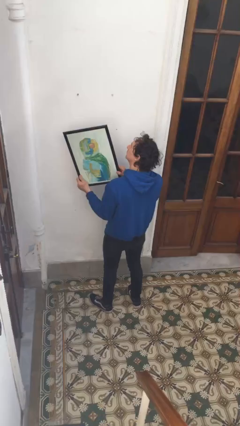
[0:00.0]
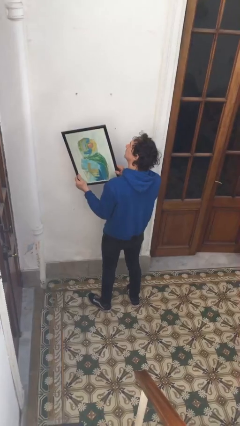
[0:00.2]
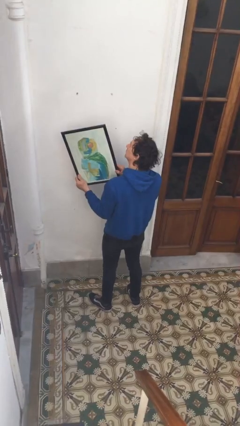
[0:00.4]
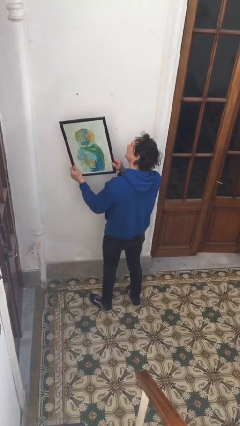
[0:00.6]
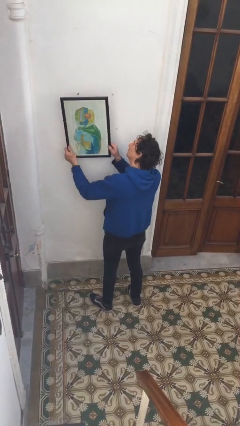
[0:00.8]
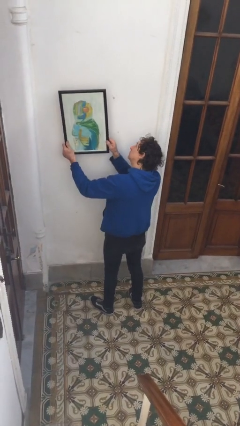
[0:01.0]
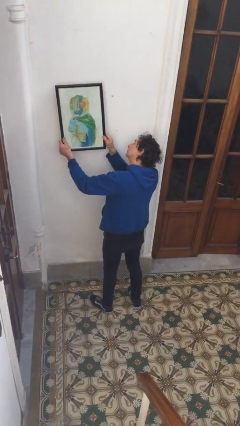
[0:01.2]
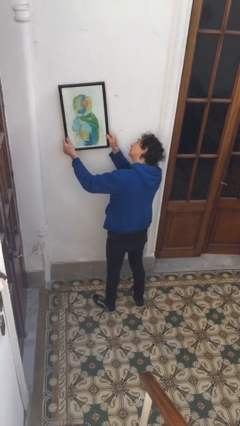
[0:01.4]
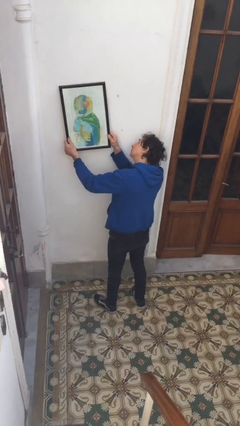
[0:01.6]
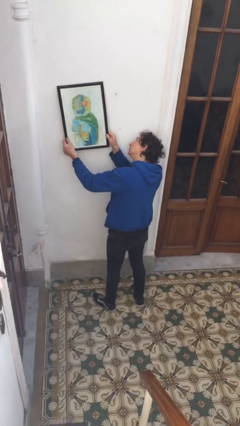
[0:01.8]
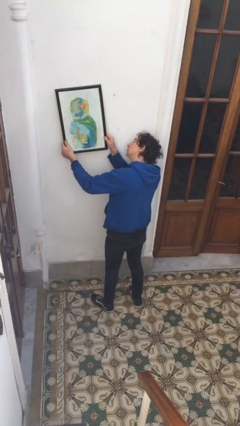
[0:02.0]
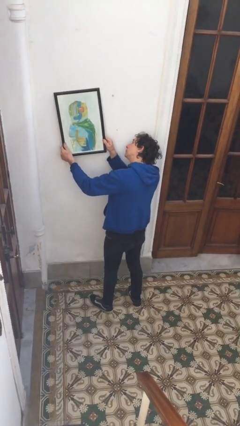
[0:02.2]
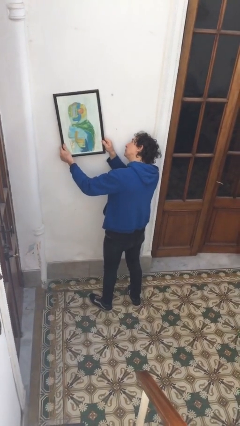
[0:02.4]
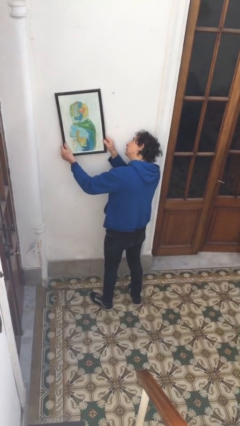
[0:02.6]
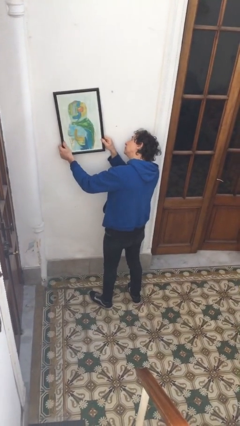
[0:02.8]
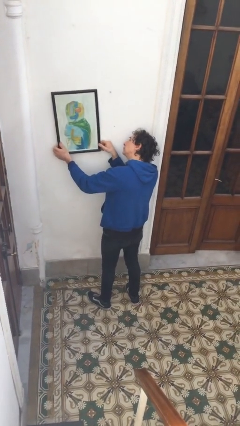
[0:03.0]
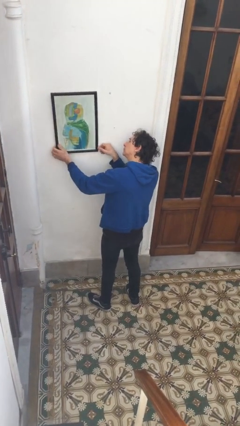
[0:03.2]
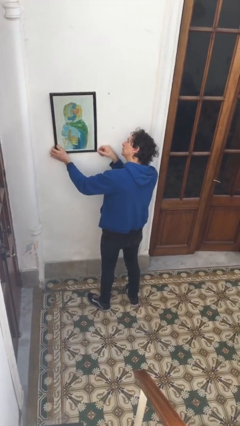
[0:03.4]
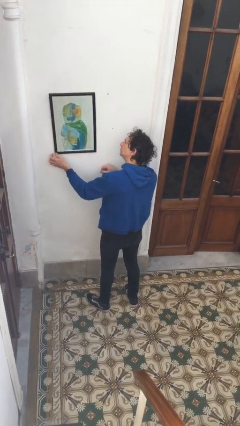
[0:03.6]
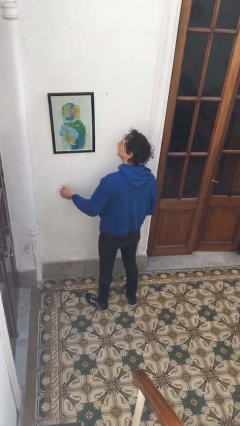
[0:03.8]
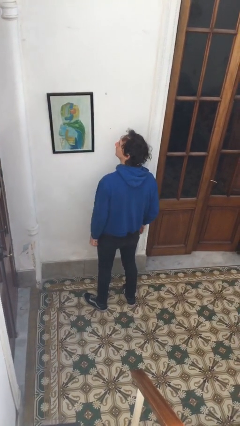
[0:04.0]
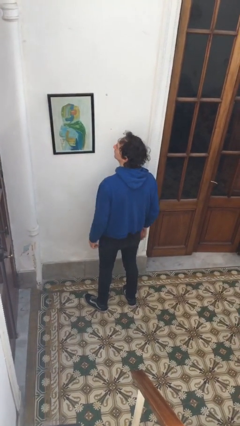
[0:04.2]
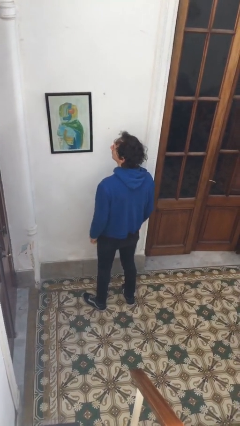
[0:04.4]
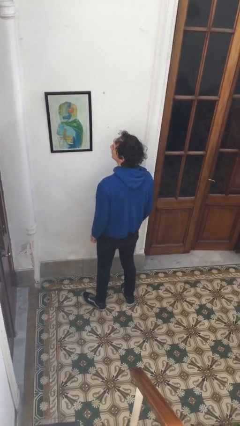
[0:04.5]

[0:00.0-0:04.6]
person puts up picture frame

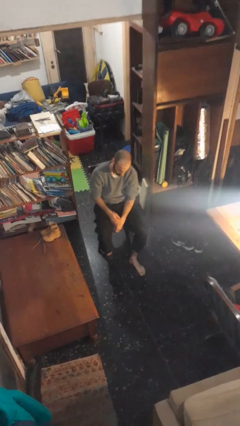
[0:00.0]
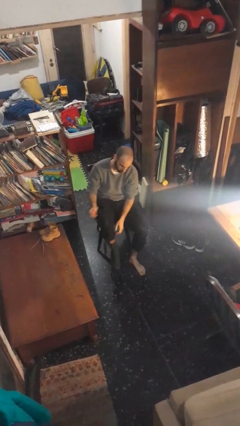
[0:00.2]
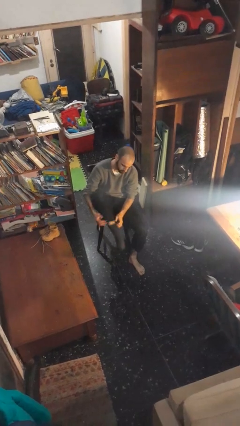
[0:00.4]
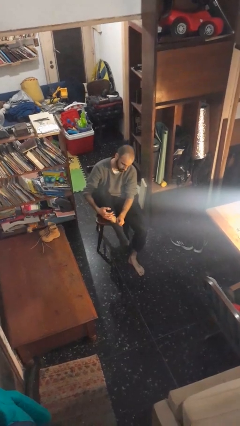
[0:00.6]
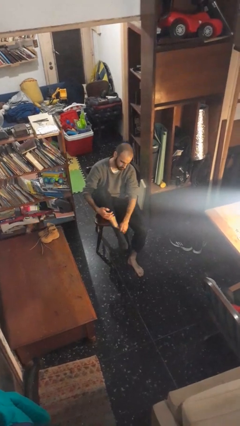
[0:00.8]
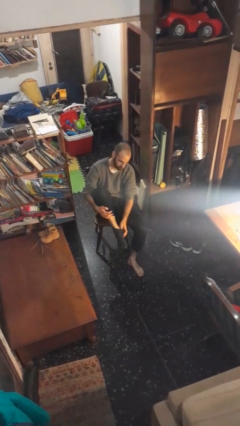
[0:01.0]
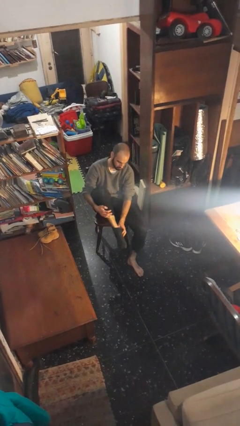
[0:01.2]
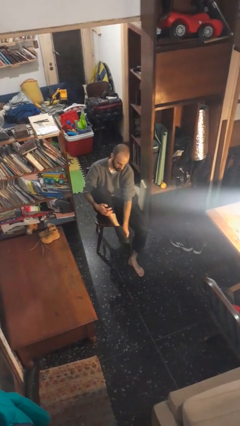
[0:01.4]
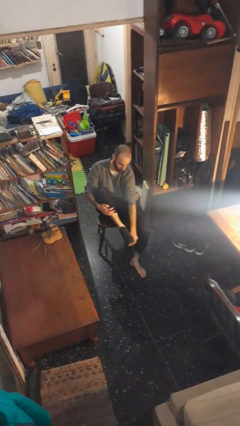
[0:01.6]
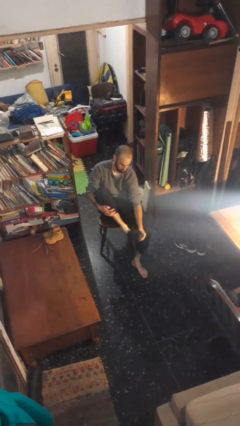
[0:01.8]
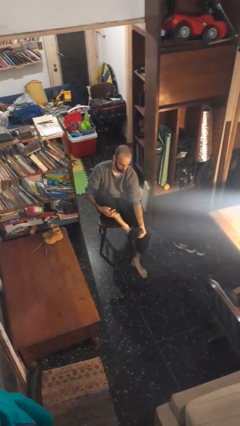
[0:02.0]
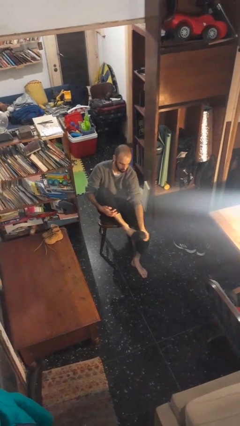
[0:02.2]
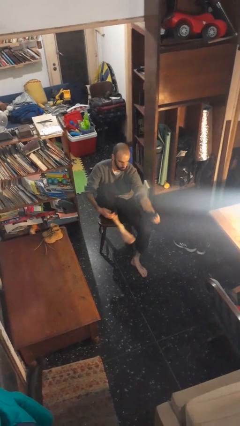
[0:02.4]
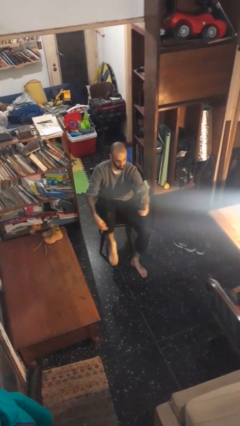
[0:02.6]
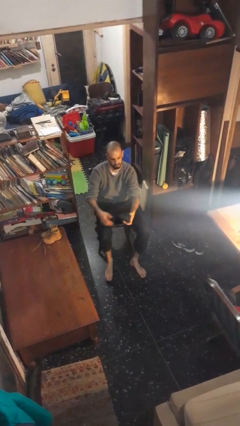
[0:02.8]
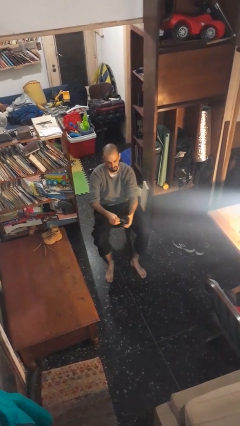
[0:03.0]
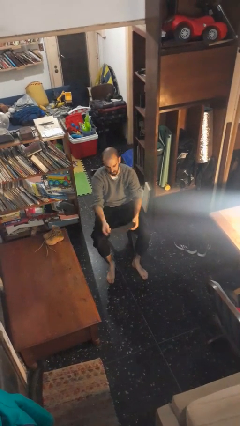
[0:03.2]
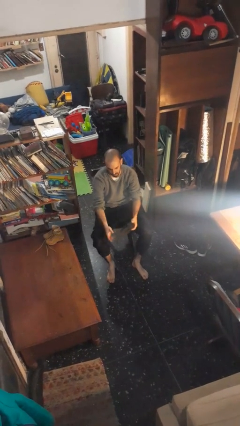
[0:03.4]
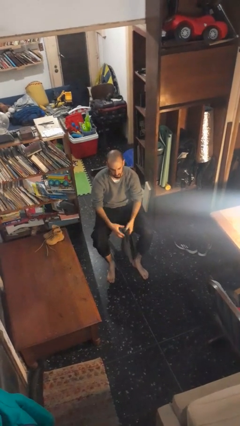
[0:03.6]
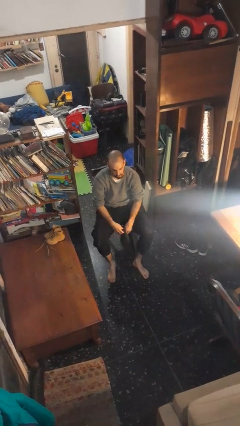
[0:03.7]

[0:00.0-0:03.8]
person takes off socks

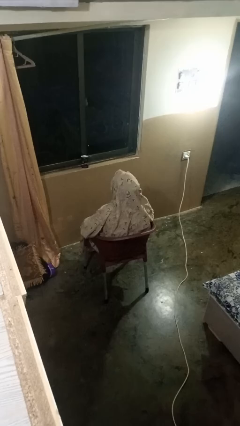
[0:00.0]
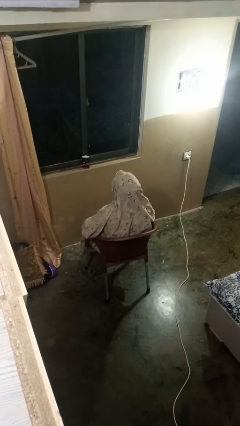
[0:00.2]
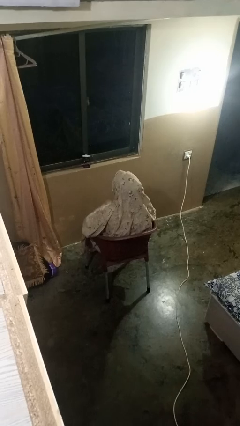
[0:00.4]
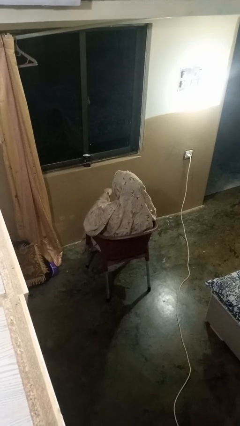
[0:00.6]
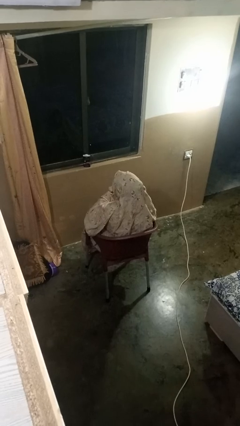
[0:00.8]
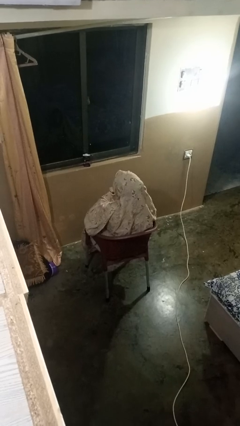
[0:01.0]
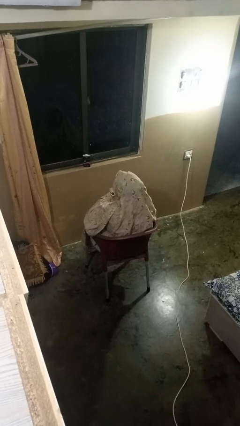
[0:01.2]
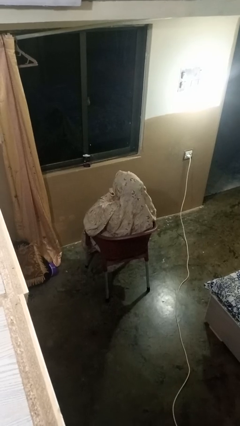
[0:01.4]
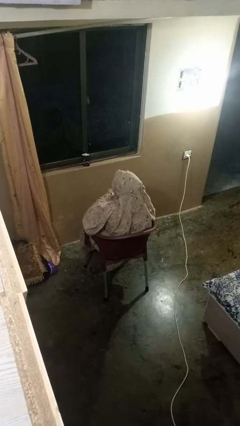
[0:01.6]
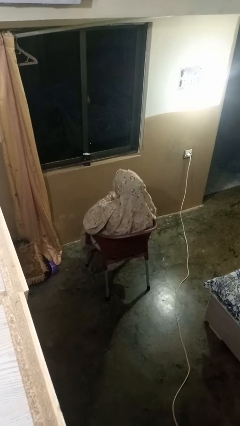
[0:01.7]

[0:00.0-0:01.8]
person looks at wristwatch

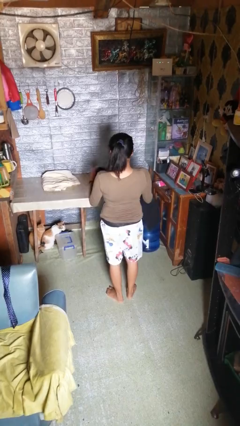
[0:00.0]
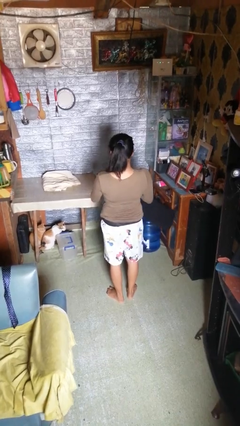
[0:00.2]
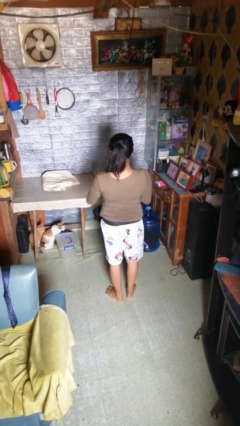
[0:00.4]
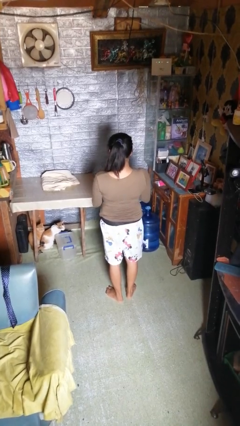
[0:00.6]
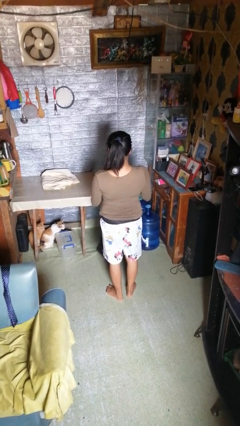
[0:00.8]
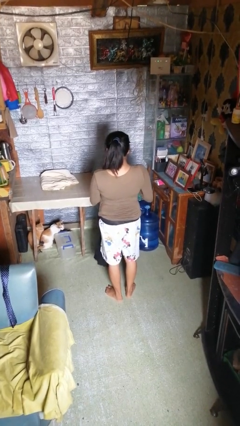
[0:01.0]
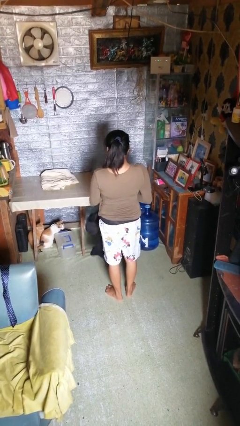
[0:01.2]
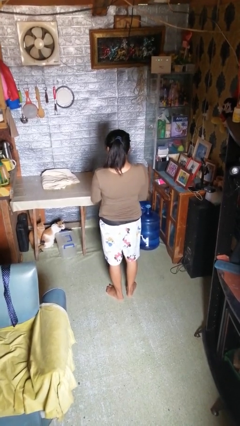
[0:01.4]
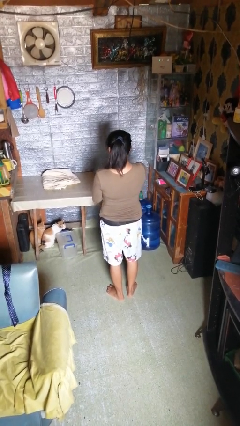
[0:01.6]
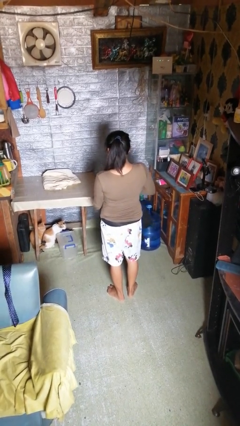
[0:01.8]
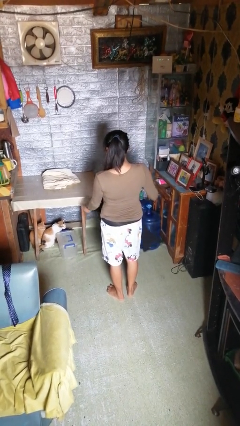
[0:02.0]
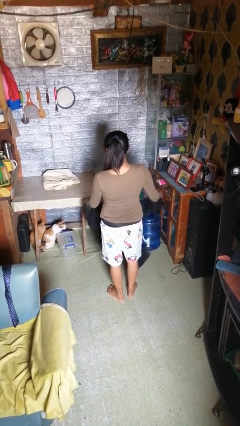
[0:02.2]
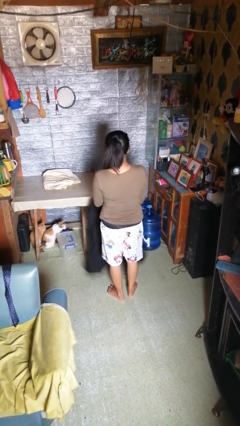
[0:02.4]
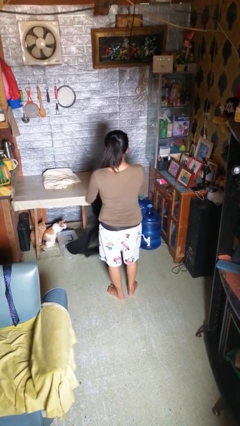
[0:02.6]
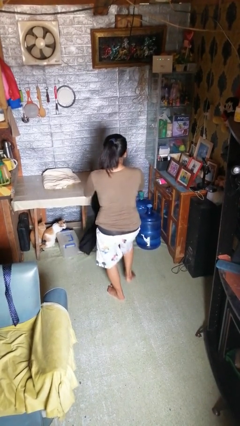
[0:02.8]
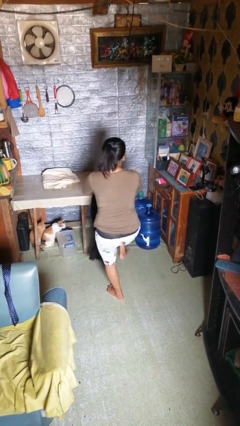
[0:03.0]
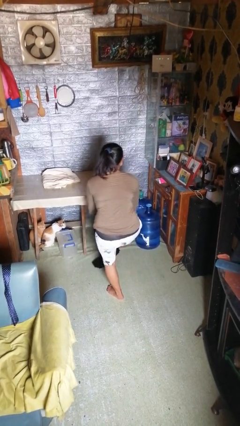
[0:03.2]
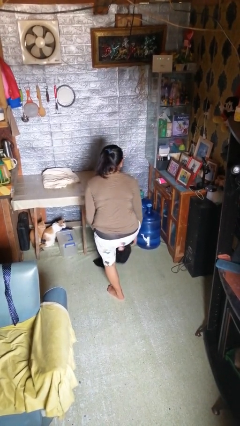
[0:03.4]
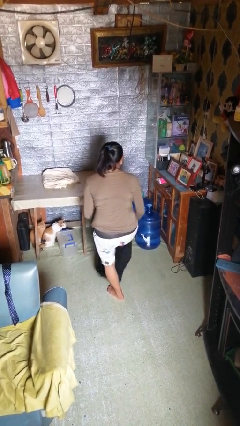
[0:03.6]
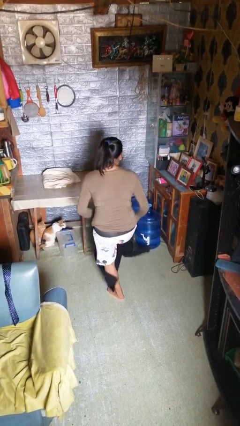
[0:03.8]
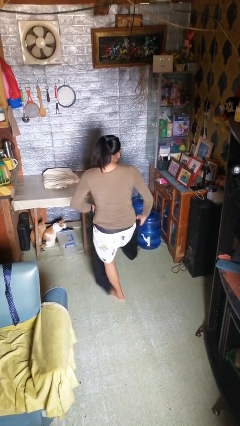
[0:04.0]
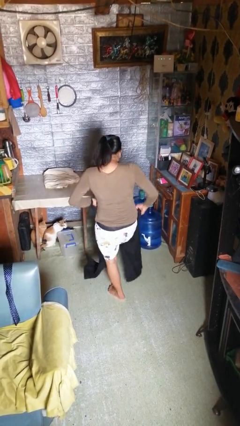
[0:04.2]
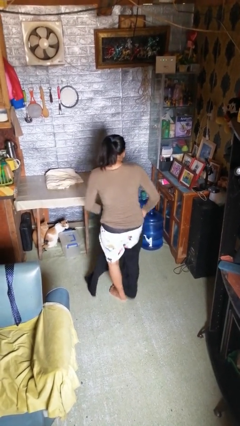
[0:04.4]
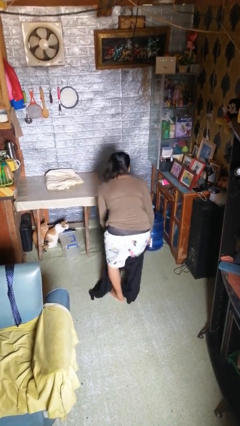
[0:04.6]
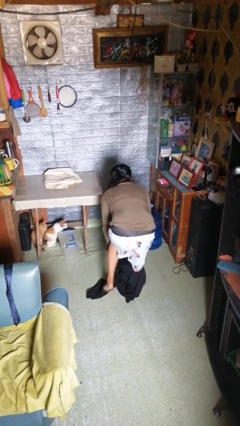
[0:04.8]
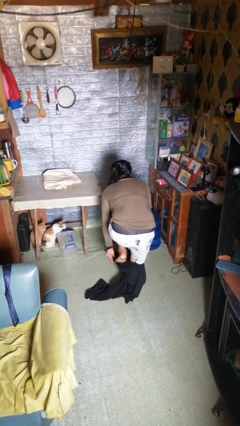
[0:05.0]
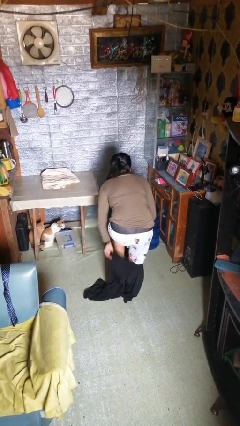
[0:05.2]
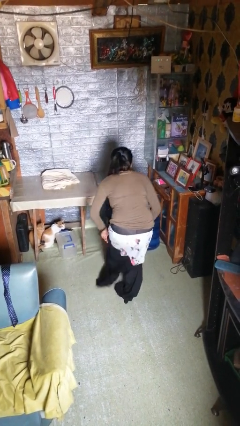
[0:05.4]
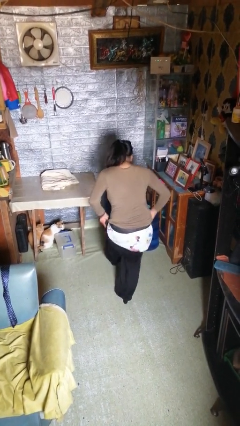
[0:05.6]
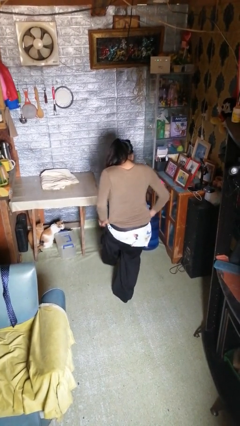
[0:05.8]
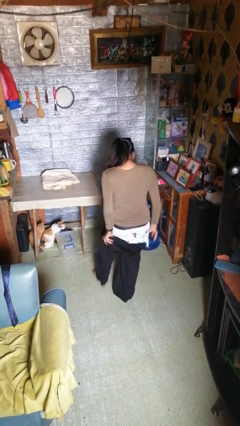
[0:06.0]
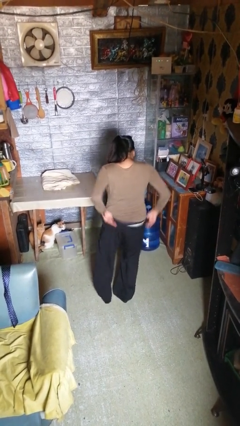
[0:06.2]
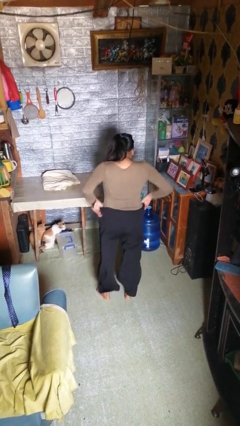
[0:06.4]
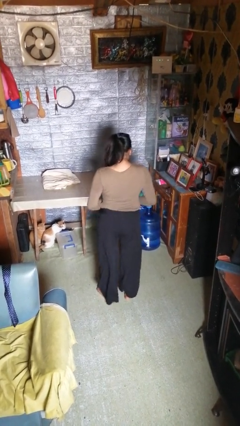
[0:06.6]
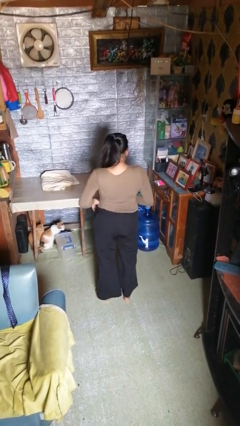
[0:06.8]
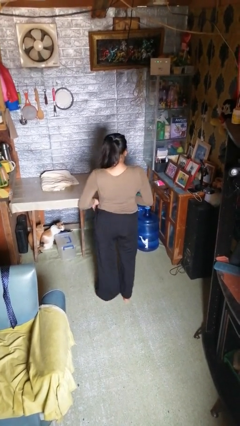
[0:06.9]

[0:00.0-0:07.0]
person puts on pants

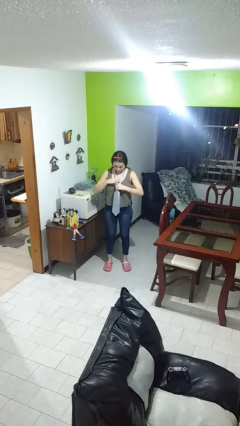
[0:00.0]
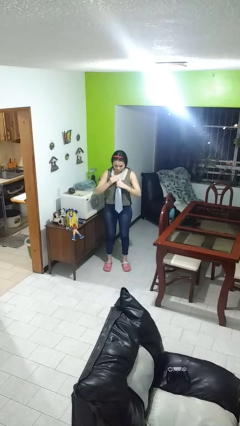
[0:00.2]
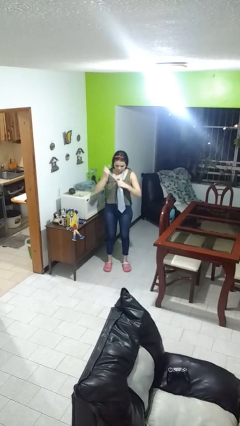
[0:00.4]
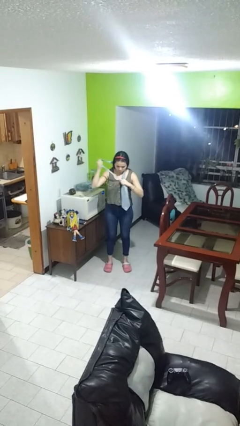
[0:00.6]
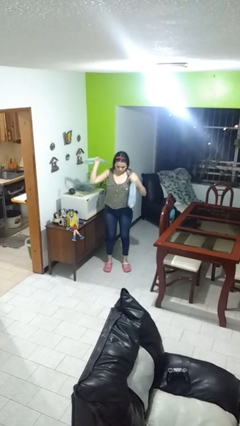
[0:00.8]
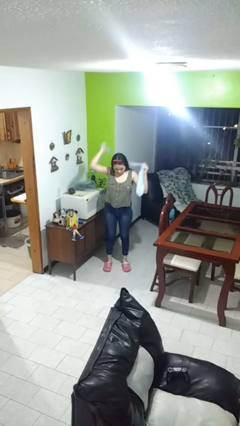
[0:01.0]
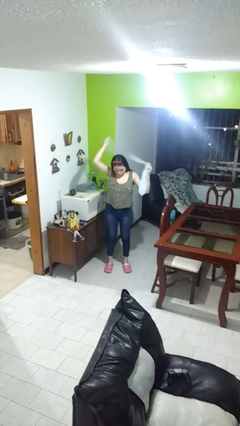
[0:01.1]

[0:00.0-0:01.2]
person takes off necktie
